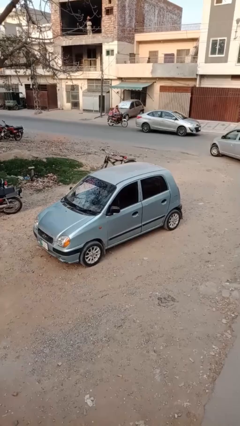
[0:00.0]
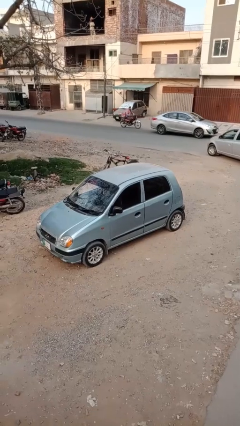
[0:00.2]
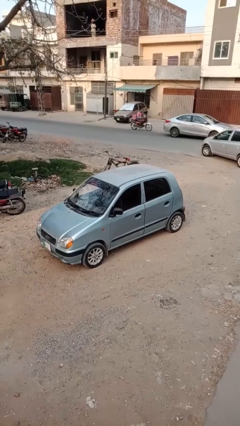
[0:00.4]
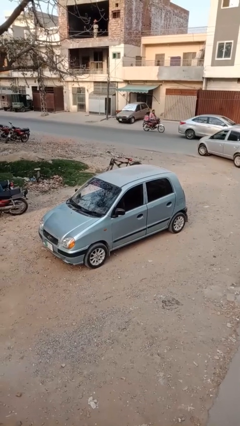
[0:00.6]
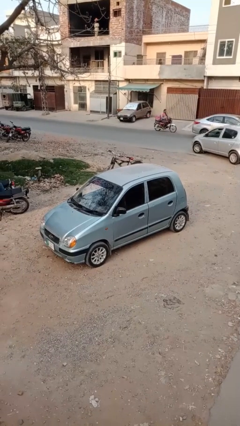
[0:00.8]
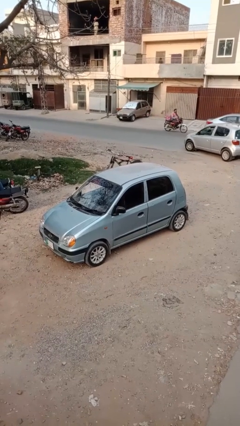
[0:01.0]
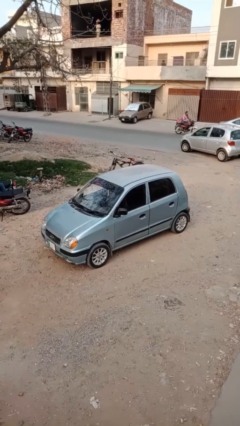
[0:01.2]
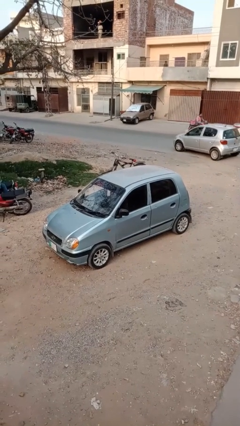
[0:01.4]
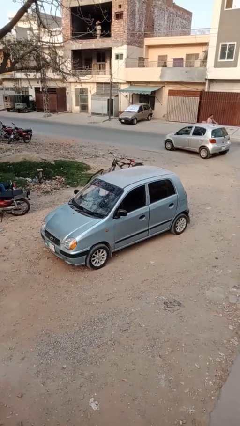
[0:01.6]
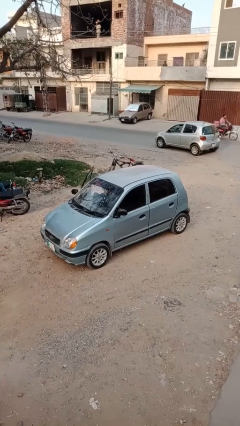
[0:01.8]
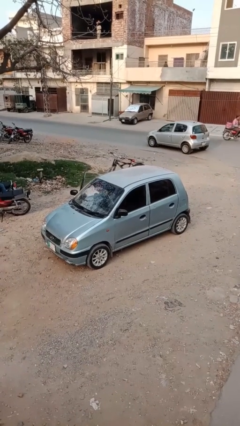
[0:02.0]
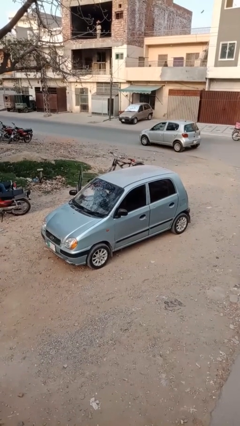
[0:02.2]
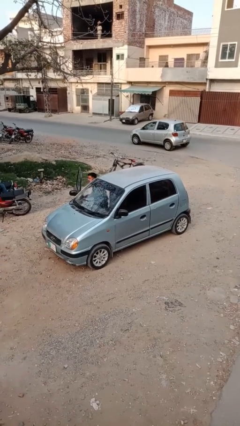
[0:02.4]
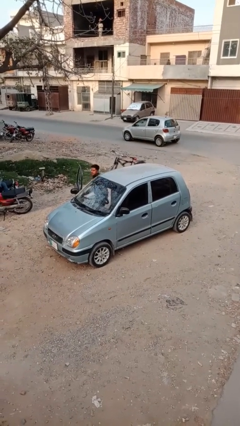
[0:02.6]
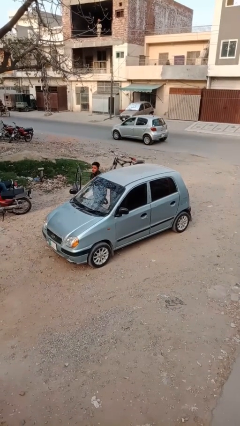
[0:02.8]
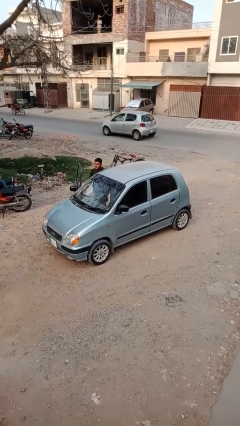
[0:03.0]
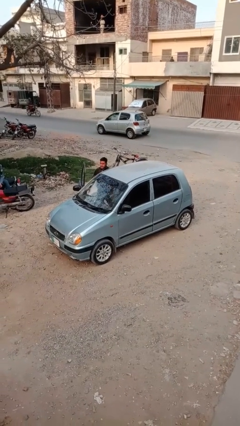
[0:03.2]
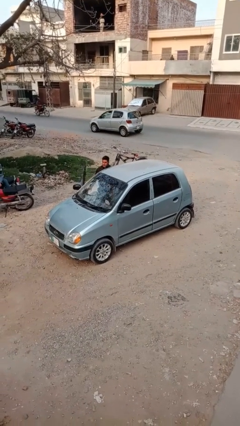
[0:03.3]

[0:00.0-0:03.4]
car drops off person

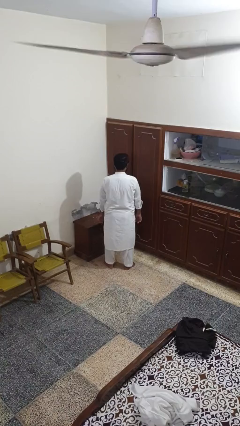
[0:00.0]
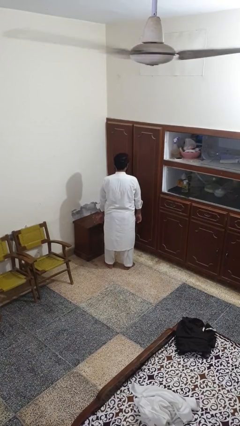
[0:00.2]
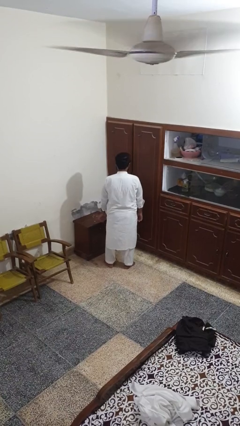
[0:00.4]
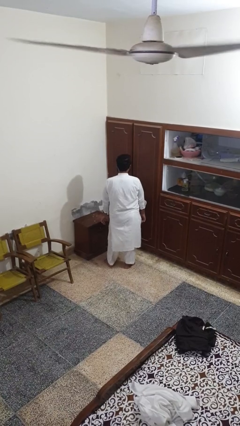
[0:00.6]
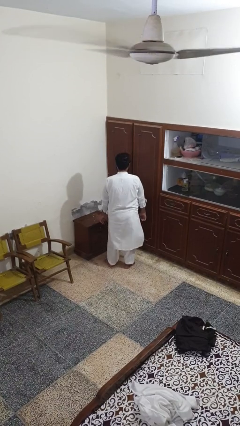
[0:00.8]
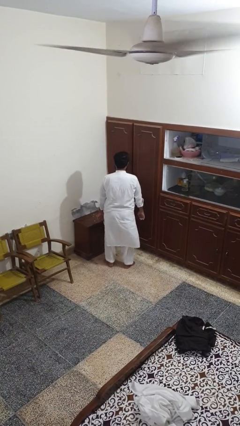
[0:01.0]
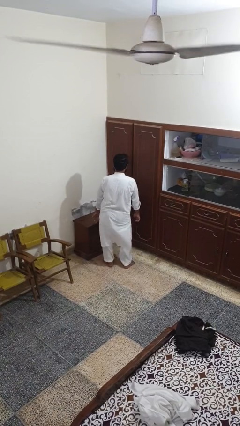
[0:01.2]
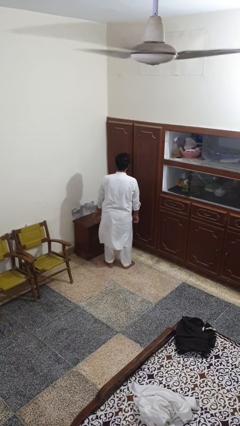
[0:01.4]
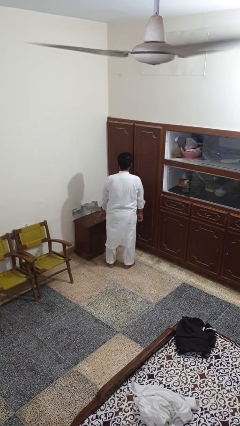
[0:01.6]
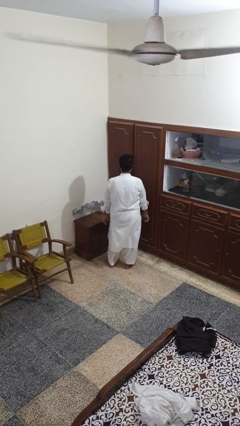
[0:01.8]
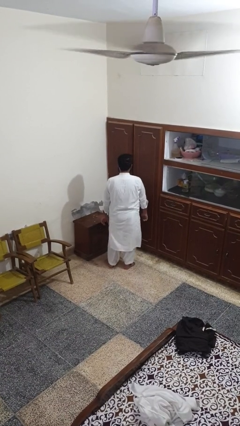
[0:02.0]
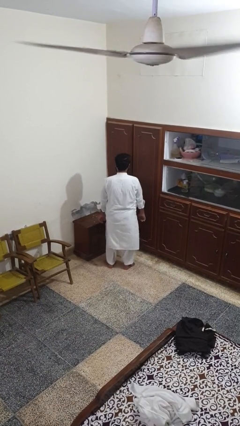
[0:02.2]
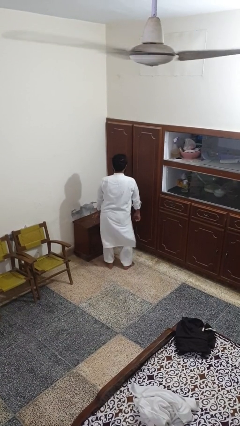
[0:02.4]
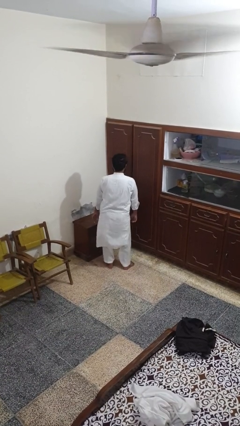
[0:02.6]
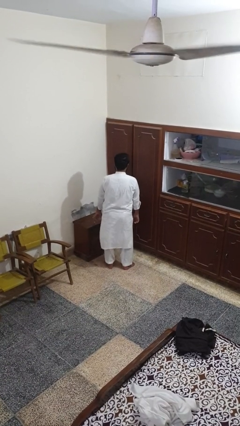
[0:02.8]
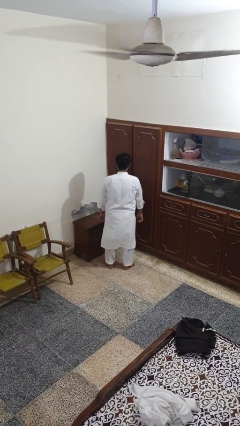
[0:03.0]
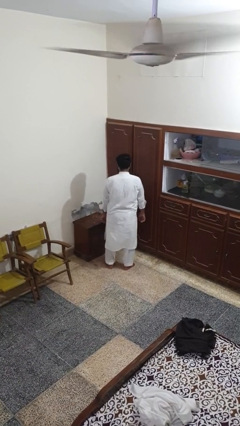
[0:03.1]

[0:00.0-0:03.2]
person wiggles hips

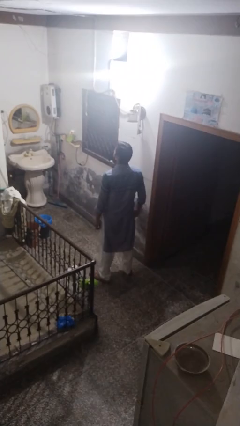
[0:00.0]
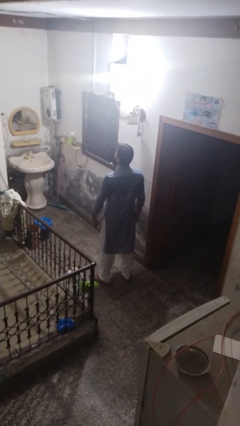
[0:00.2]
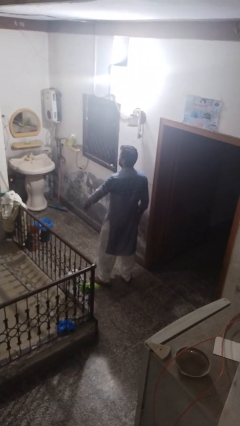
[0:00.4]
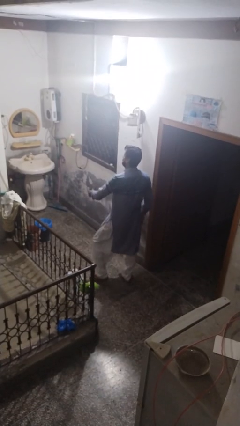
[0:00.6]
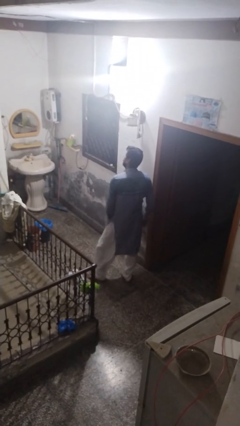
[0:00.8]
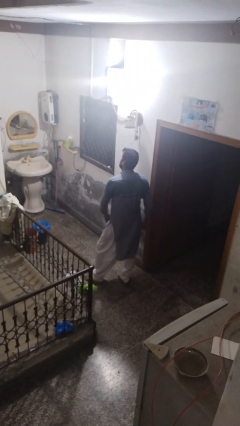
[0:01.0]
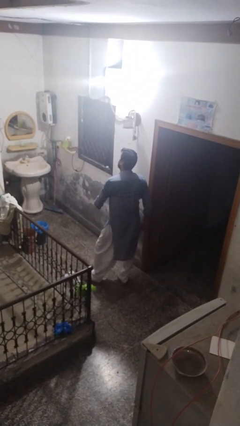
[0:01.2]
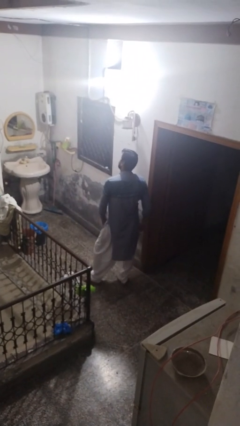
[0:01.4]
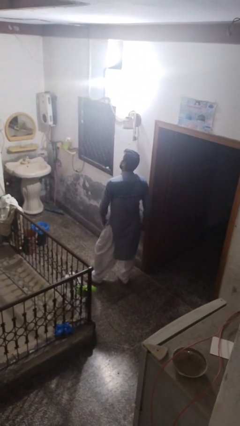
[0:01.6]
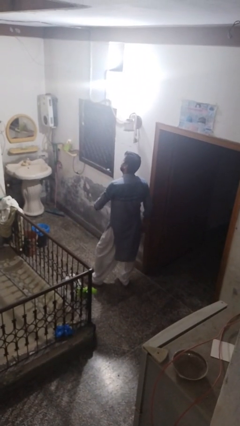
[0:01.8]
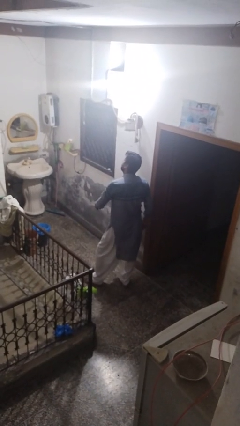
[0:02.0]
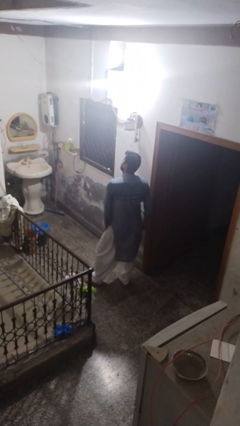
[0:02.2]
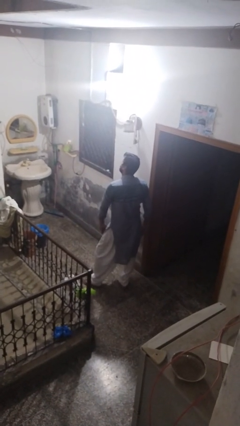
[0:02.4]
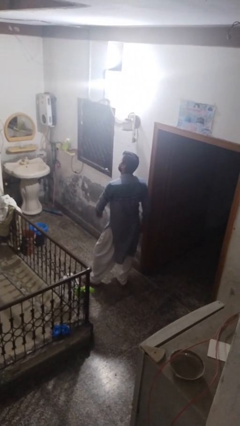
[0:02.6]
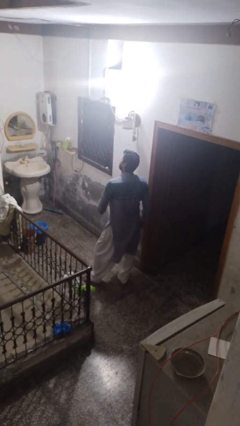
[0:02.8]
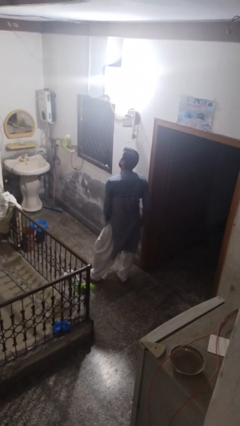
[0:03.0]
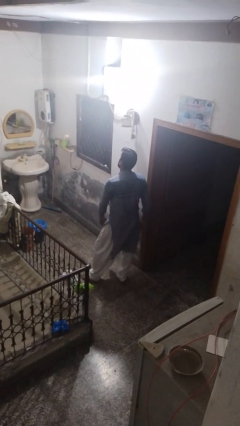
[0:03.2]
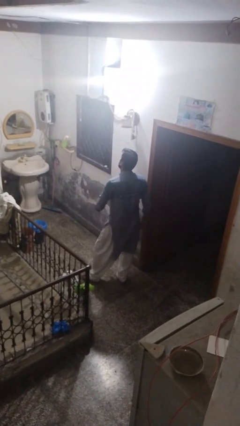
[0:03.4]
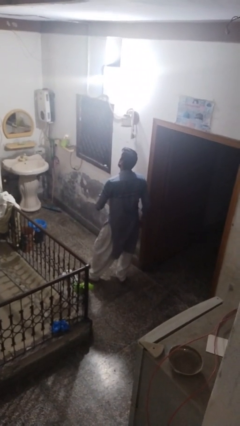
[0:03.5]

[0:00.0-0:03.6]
person slaps hands on thighs

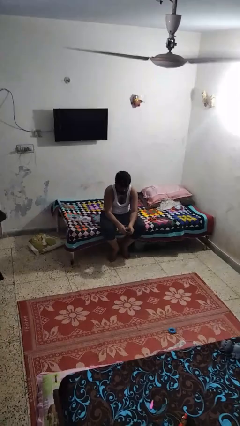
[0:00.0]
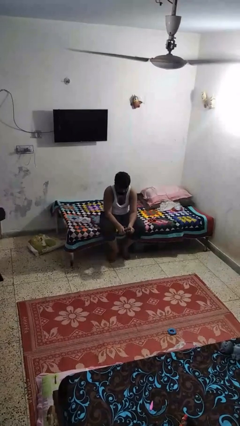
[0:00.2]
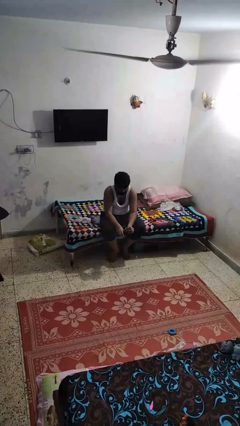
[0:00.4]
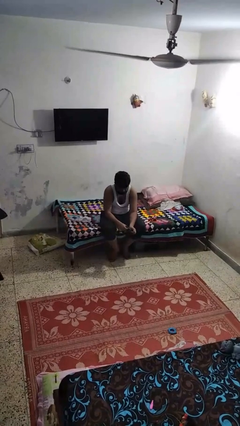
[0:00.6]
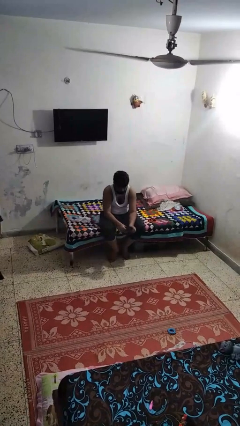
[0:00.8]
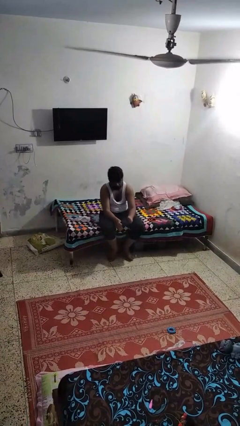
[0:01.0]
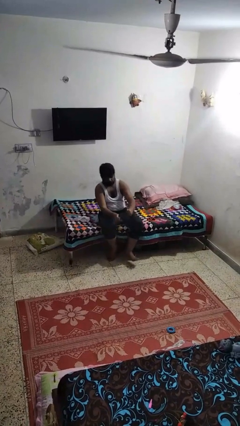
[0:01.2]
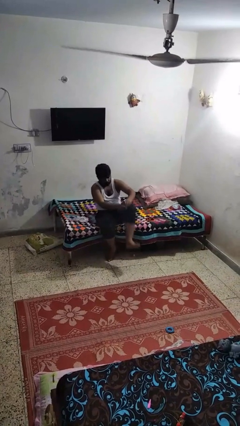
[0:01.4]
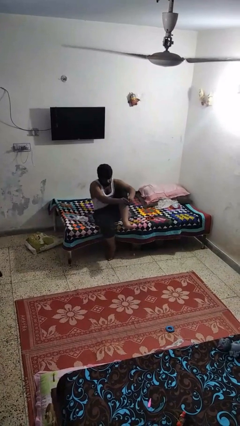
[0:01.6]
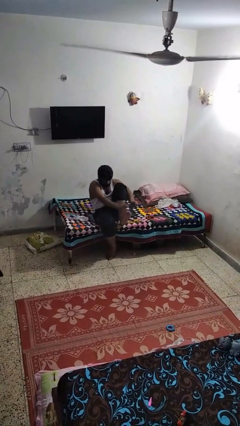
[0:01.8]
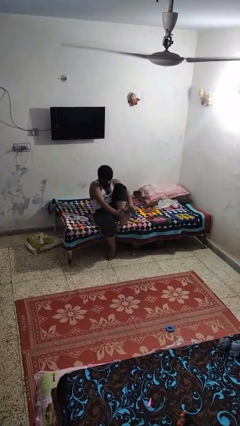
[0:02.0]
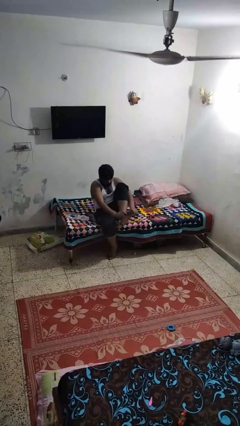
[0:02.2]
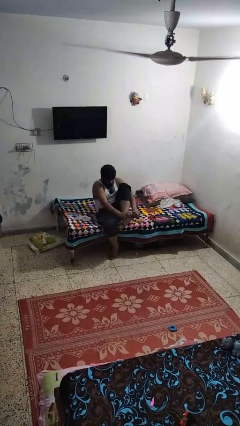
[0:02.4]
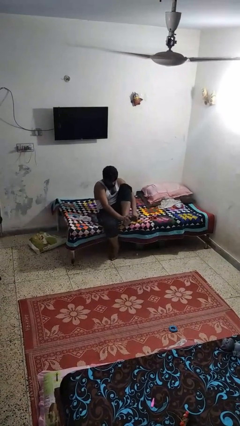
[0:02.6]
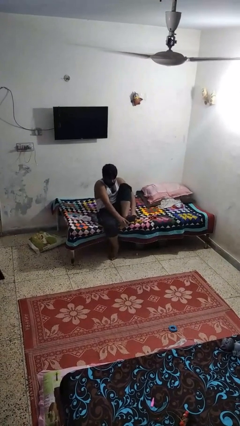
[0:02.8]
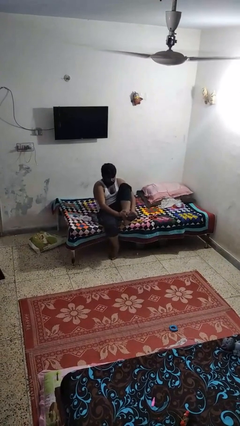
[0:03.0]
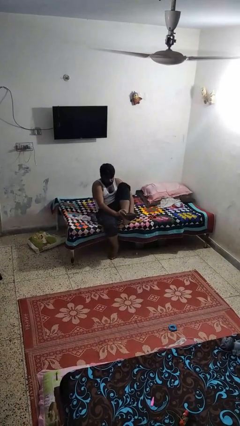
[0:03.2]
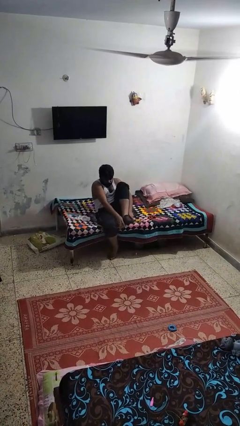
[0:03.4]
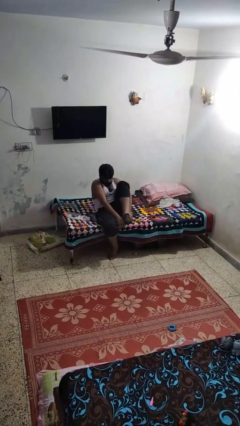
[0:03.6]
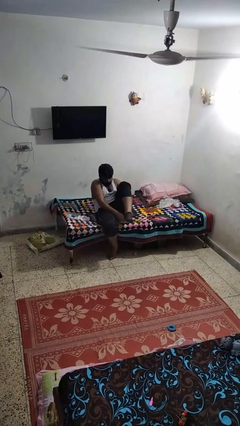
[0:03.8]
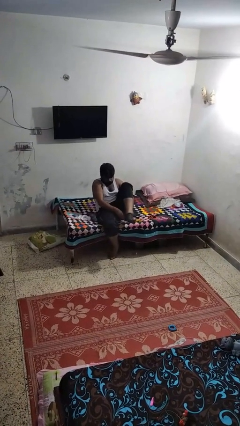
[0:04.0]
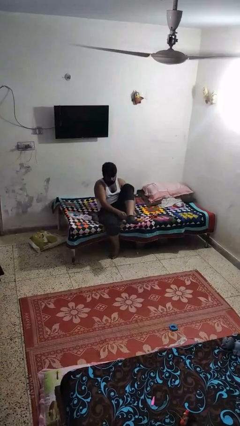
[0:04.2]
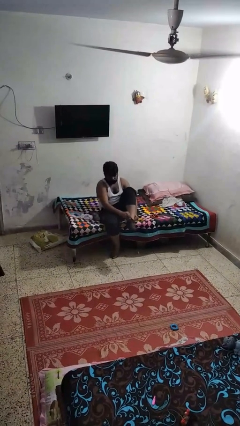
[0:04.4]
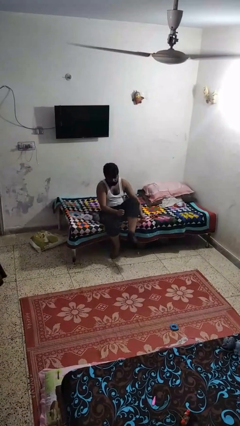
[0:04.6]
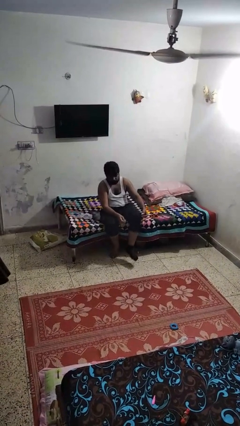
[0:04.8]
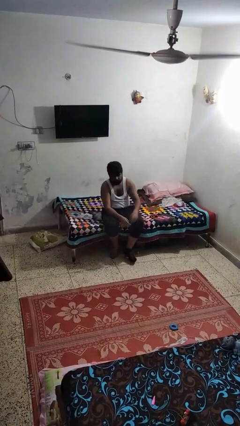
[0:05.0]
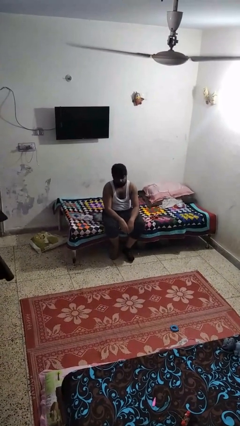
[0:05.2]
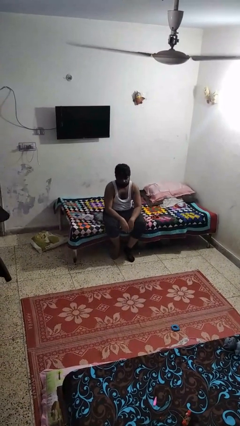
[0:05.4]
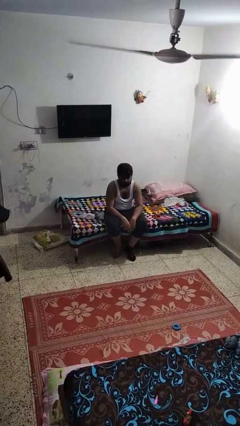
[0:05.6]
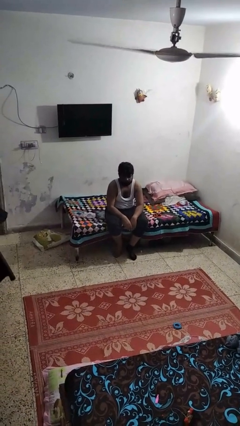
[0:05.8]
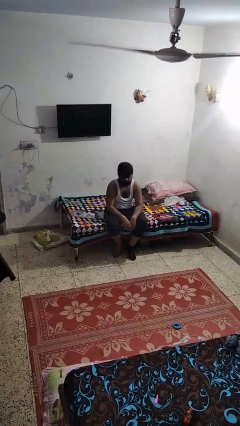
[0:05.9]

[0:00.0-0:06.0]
person puts on socks

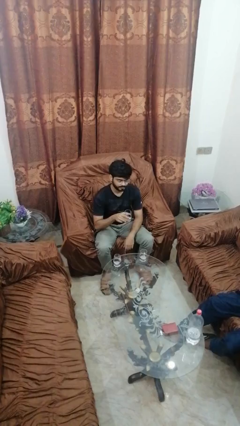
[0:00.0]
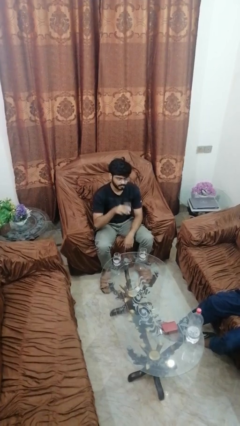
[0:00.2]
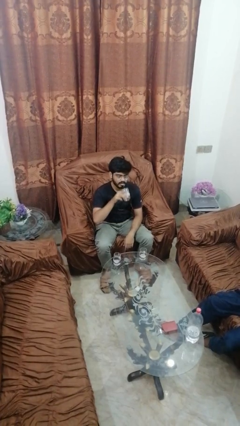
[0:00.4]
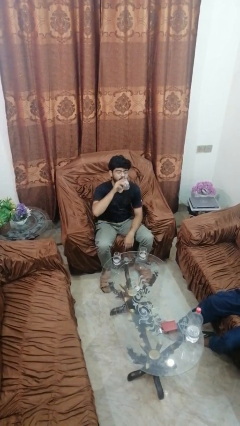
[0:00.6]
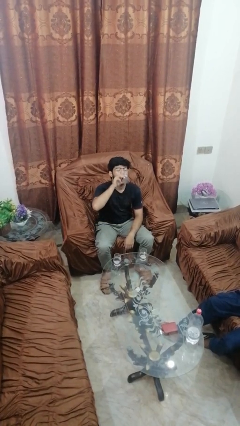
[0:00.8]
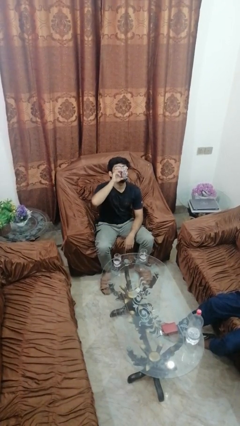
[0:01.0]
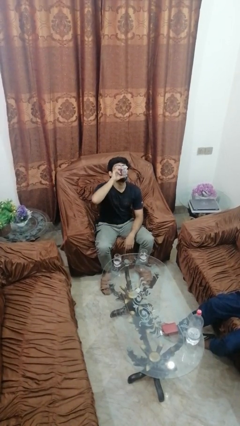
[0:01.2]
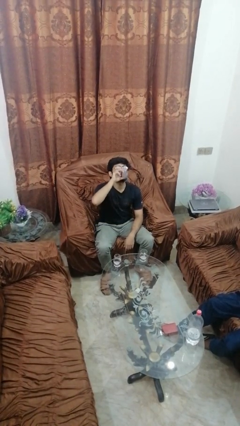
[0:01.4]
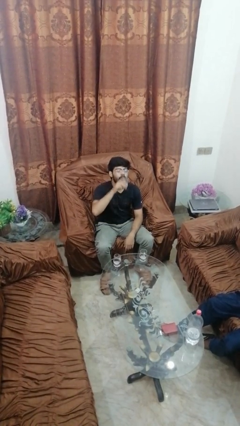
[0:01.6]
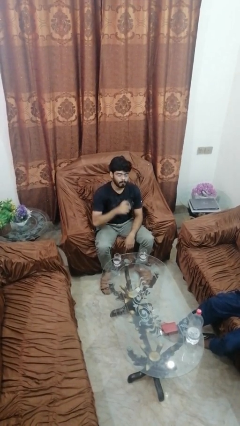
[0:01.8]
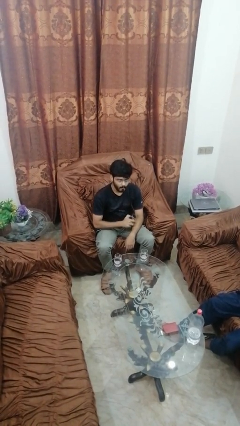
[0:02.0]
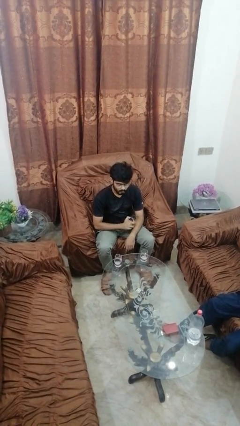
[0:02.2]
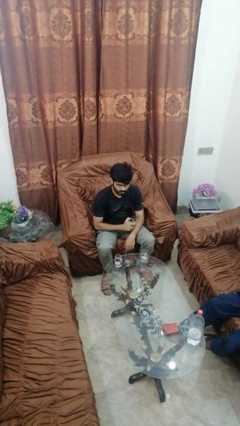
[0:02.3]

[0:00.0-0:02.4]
person drinks from shotglass
